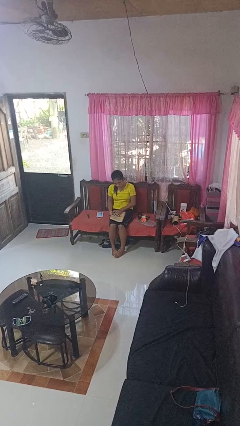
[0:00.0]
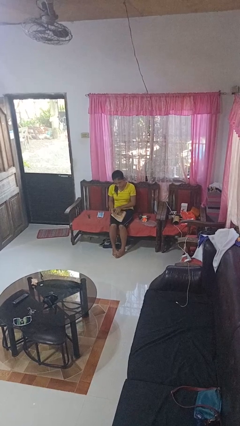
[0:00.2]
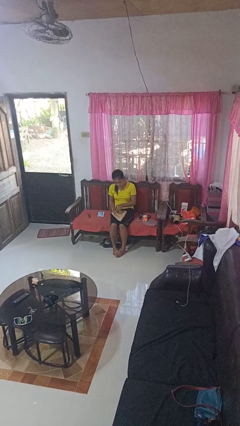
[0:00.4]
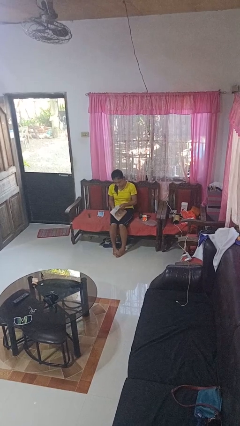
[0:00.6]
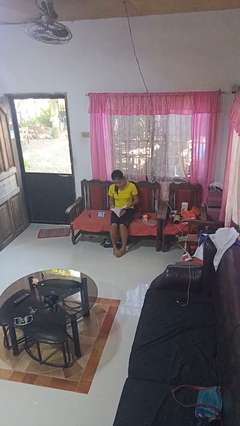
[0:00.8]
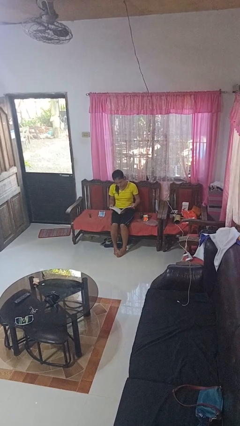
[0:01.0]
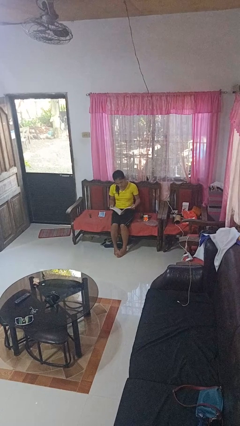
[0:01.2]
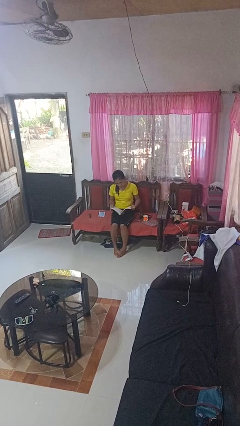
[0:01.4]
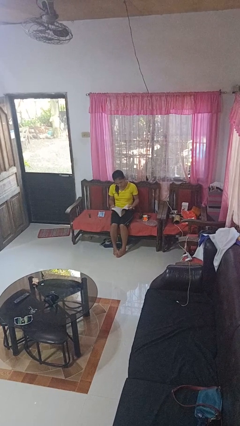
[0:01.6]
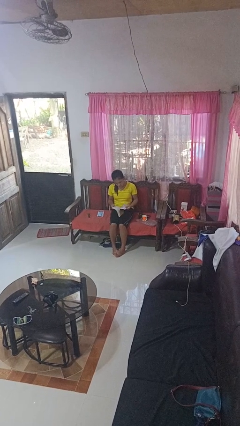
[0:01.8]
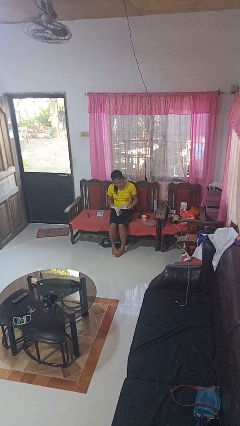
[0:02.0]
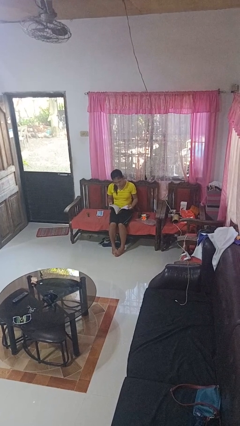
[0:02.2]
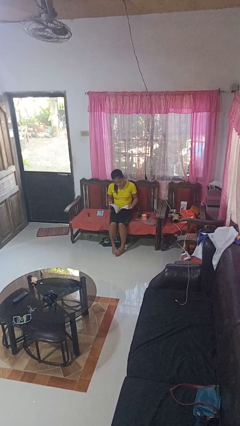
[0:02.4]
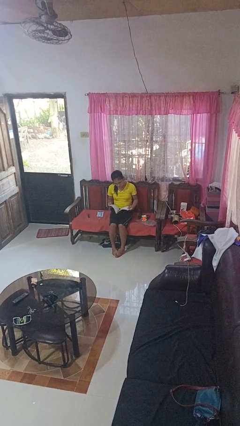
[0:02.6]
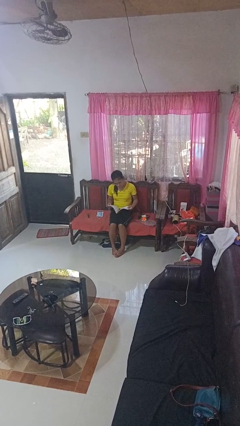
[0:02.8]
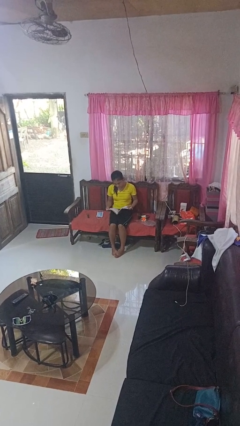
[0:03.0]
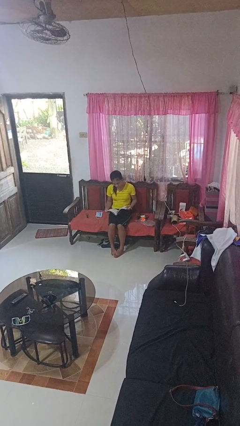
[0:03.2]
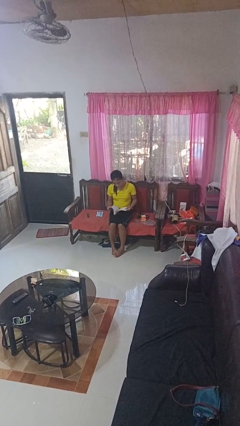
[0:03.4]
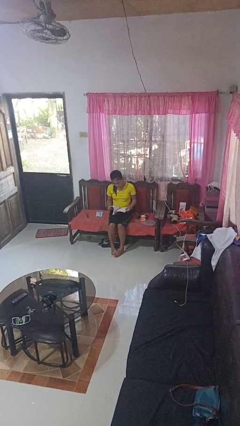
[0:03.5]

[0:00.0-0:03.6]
person reads book

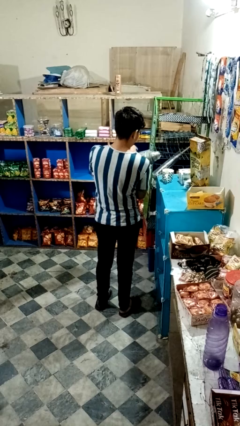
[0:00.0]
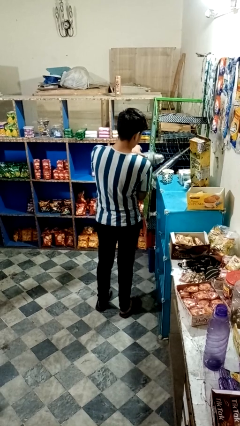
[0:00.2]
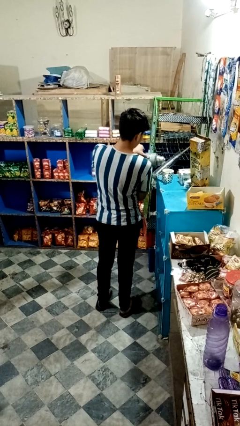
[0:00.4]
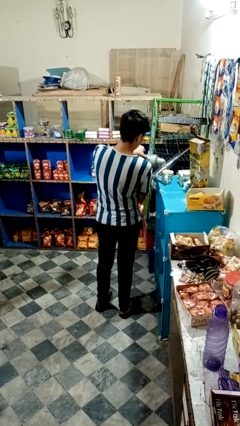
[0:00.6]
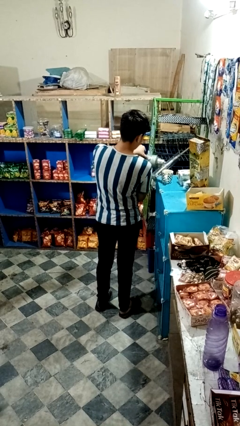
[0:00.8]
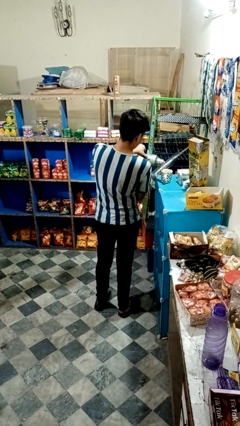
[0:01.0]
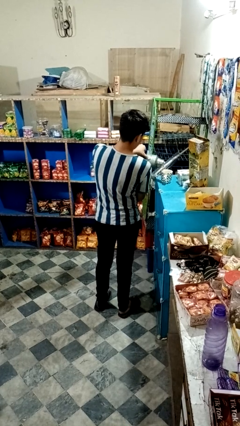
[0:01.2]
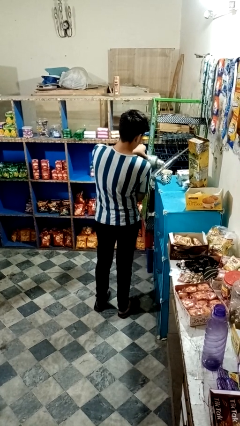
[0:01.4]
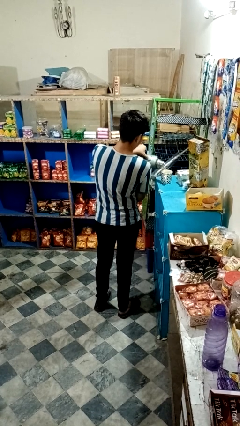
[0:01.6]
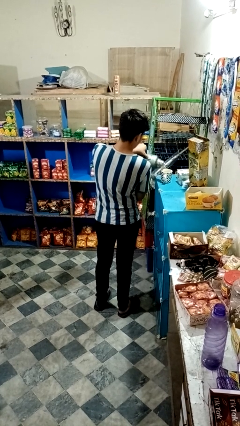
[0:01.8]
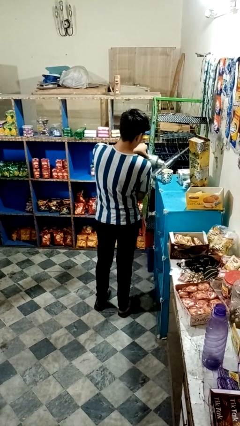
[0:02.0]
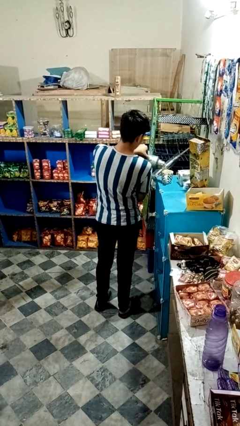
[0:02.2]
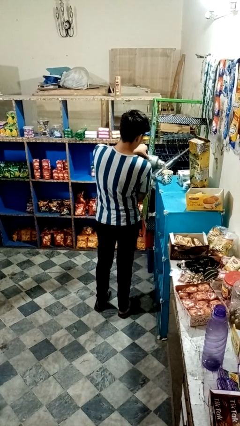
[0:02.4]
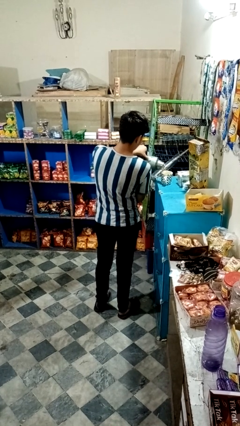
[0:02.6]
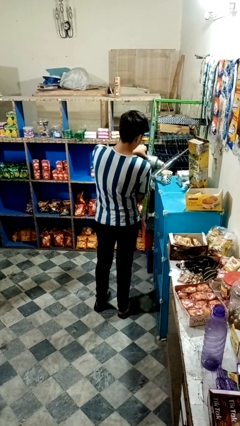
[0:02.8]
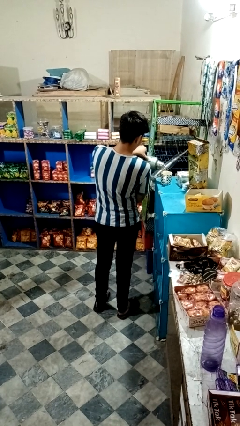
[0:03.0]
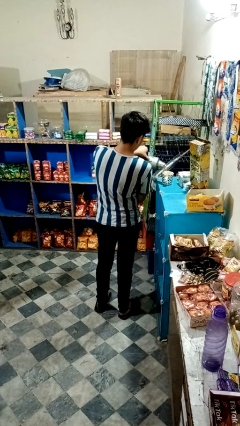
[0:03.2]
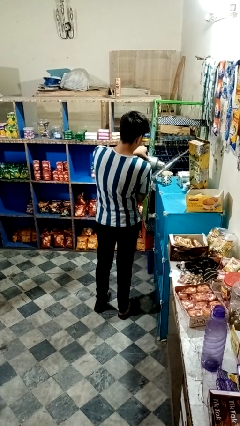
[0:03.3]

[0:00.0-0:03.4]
person pours coffee into mug

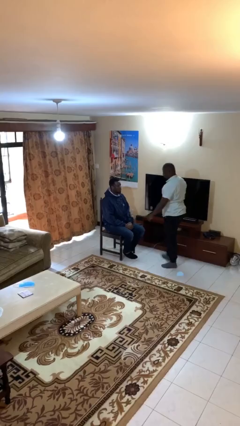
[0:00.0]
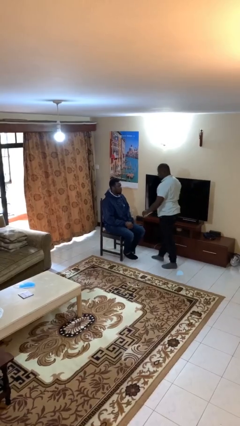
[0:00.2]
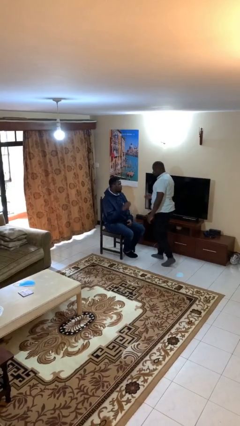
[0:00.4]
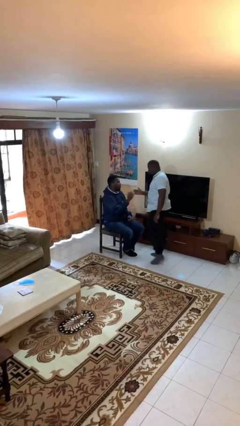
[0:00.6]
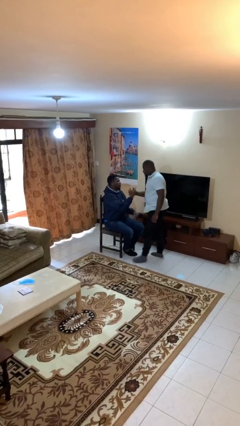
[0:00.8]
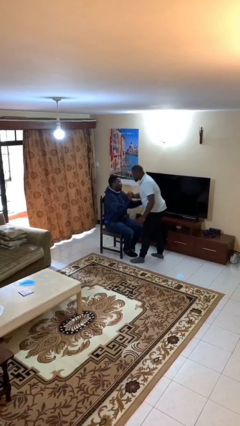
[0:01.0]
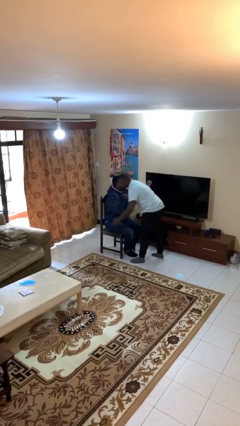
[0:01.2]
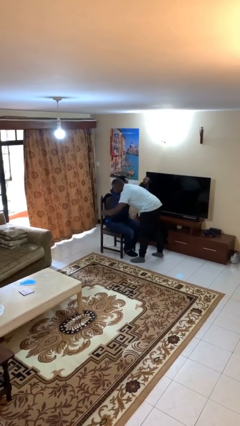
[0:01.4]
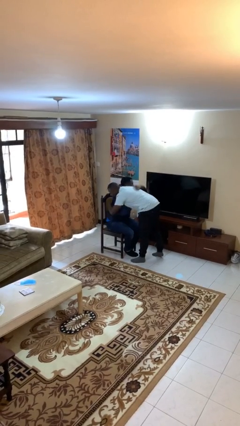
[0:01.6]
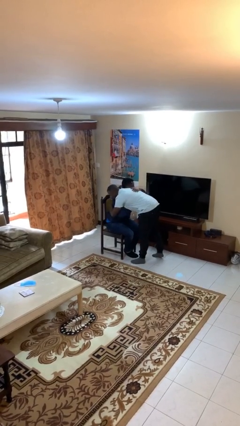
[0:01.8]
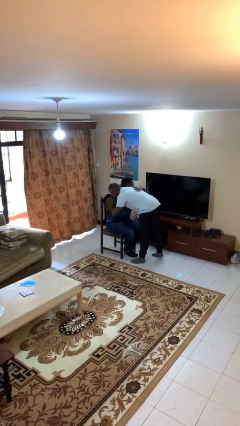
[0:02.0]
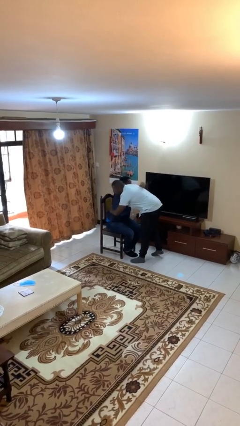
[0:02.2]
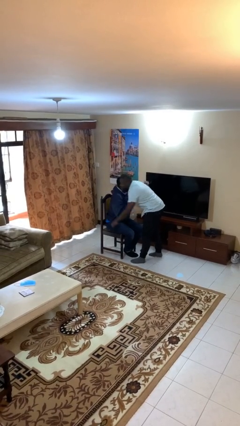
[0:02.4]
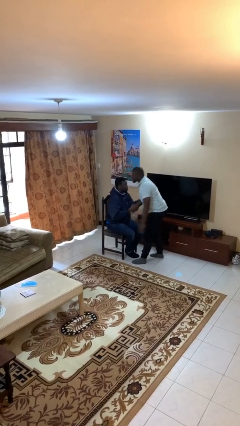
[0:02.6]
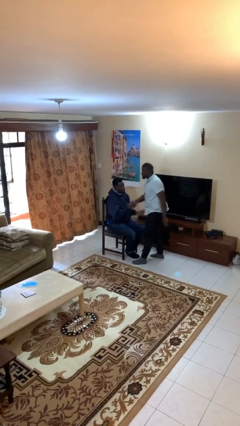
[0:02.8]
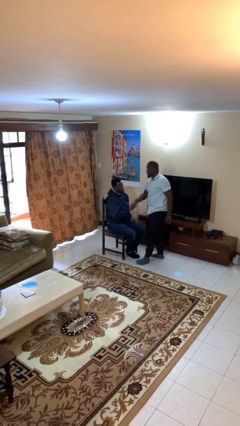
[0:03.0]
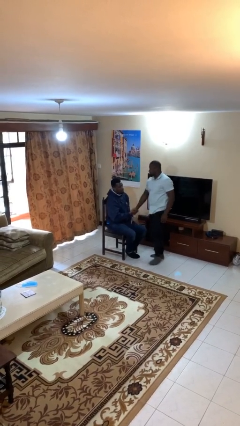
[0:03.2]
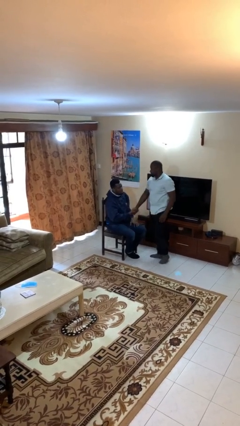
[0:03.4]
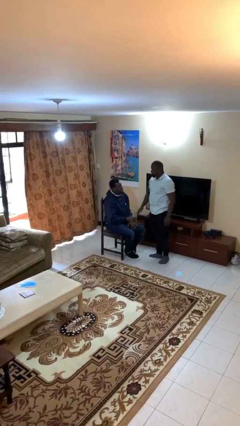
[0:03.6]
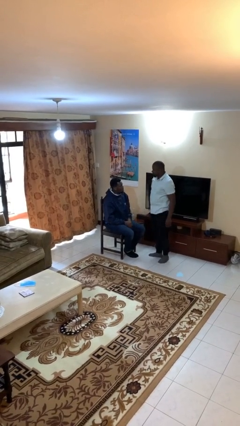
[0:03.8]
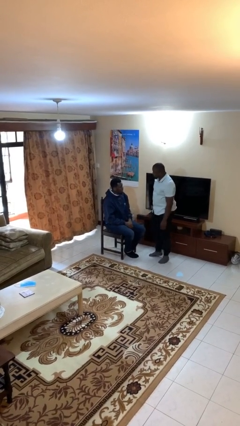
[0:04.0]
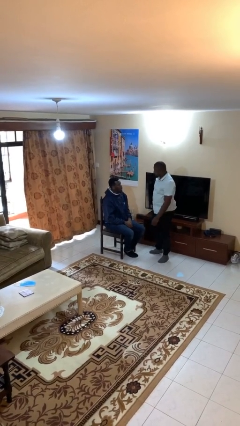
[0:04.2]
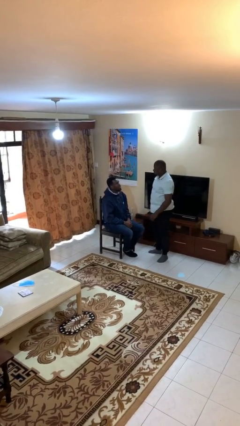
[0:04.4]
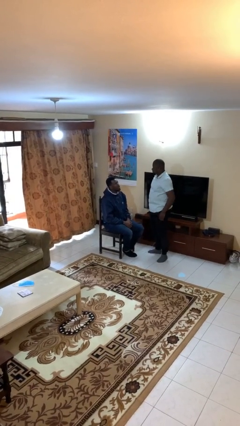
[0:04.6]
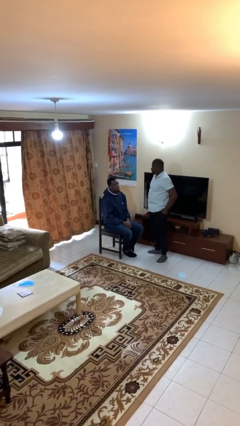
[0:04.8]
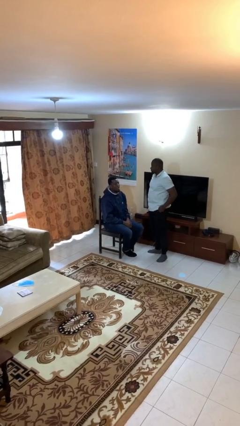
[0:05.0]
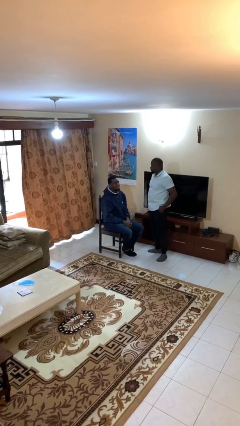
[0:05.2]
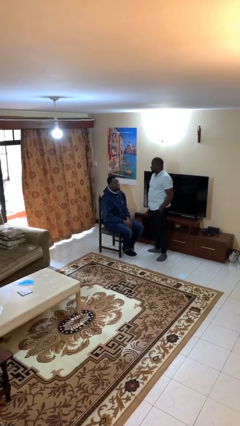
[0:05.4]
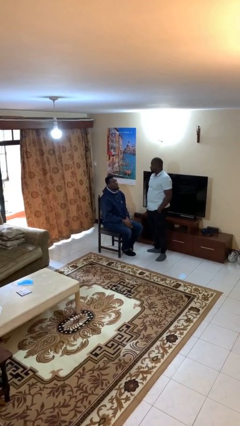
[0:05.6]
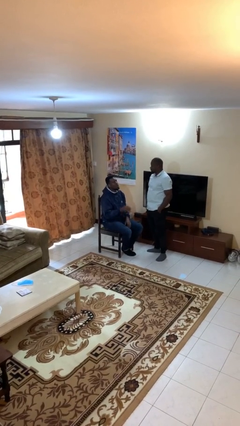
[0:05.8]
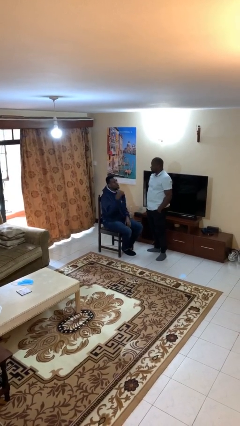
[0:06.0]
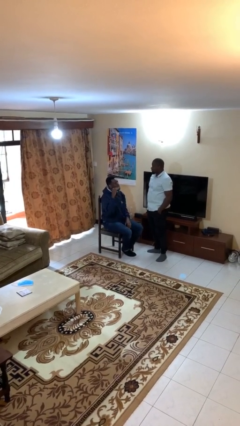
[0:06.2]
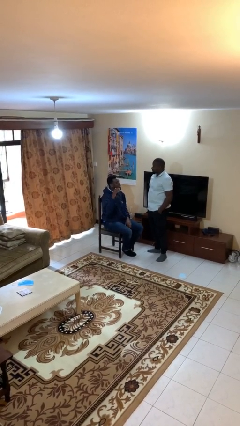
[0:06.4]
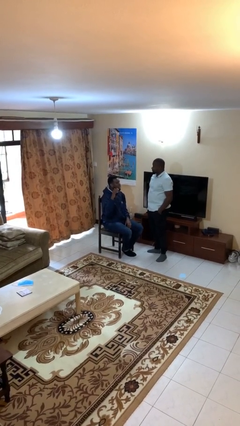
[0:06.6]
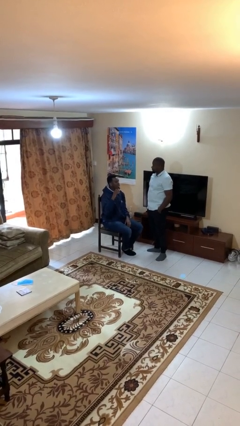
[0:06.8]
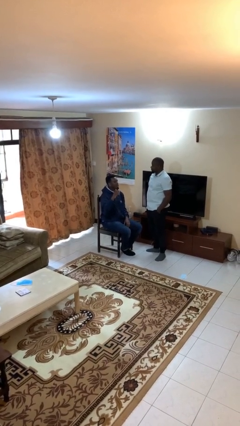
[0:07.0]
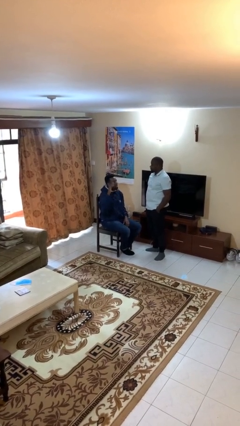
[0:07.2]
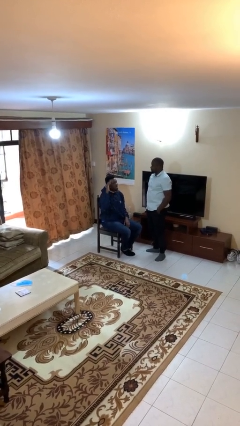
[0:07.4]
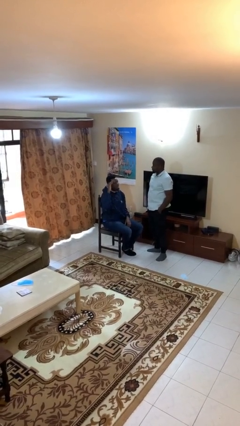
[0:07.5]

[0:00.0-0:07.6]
person embraces person

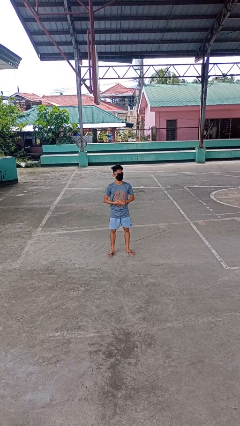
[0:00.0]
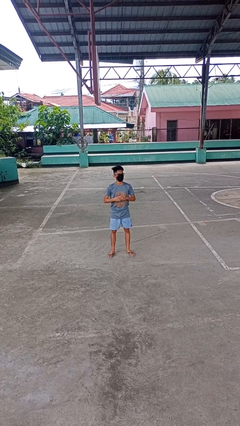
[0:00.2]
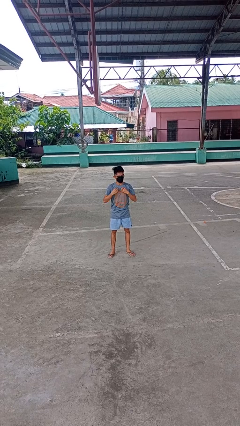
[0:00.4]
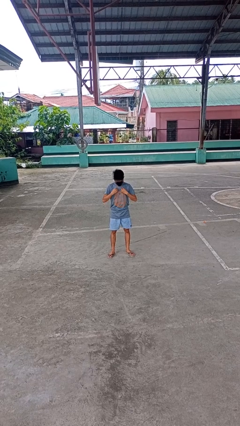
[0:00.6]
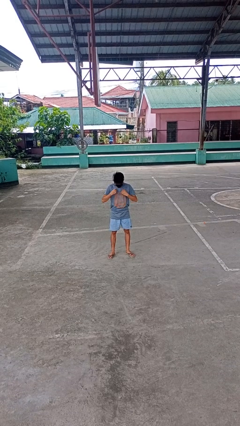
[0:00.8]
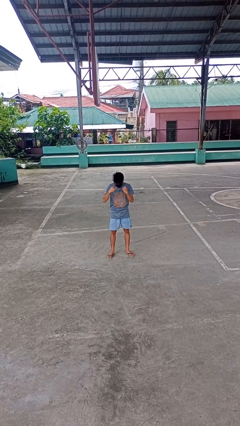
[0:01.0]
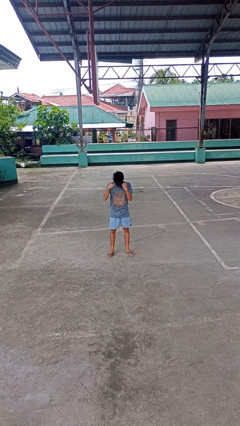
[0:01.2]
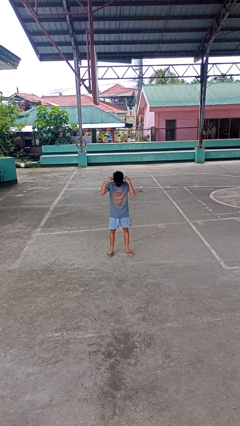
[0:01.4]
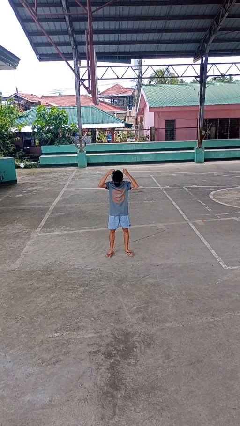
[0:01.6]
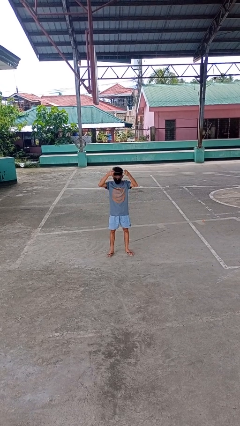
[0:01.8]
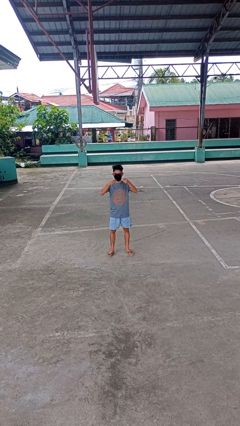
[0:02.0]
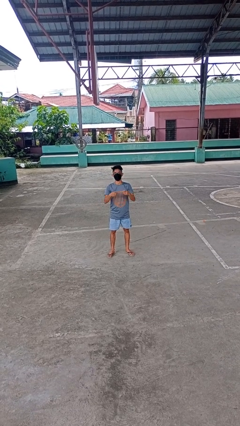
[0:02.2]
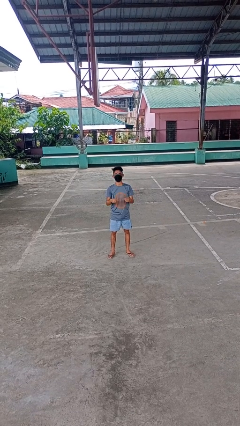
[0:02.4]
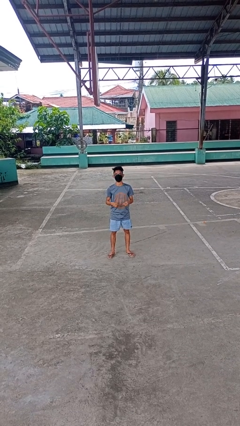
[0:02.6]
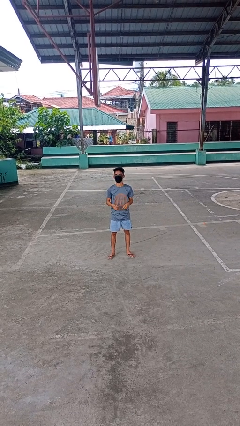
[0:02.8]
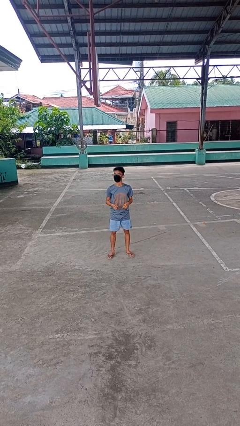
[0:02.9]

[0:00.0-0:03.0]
person takes off necklace

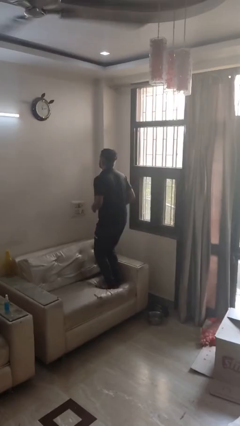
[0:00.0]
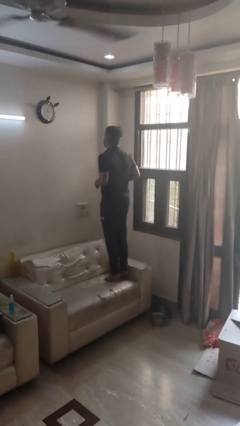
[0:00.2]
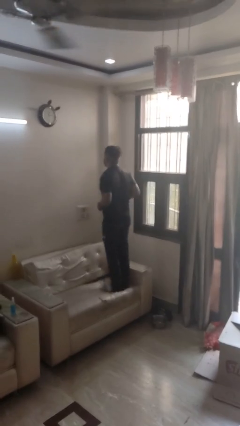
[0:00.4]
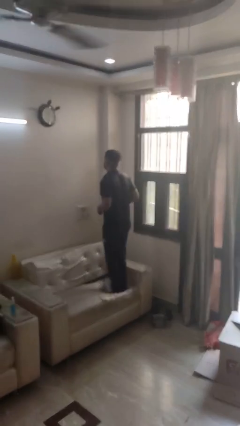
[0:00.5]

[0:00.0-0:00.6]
person jumps on couch
